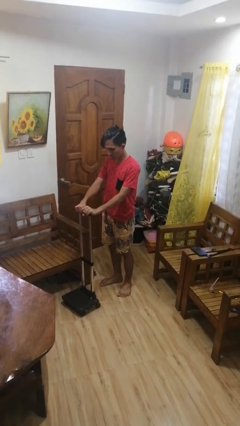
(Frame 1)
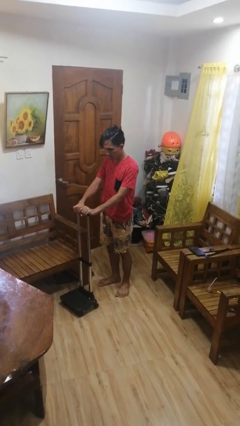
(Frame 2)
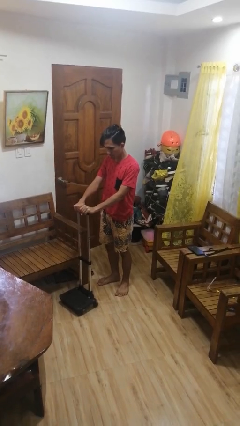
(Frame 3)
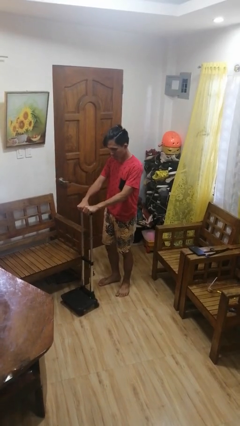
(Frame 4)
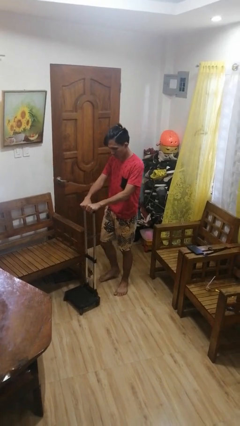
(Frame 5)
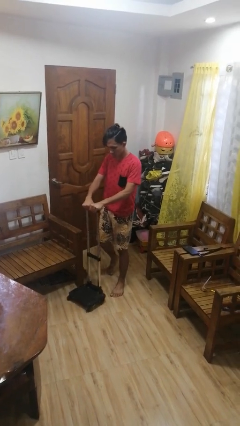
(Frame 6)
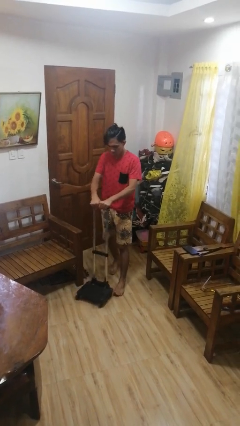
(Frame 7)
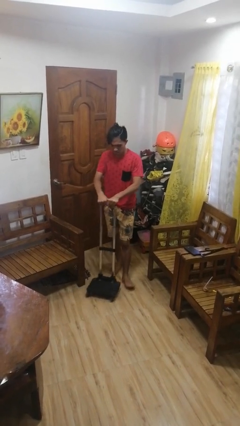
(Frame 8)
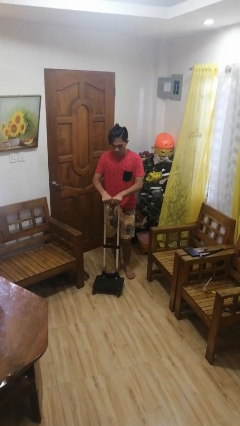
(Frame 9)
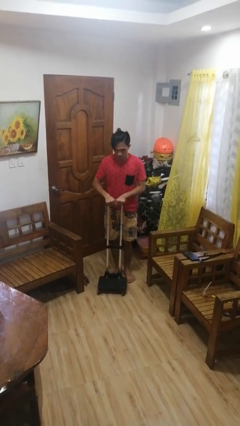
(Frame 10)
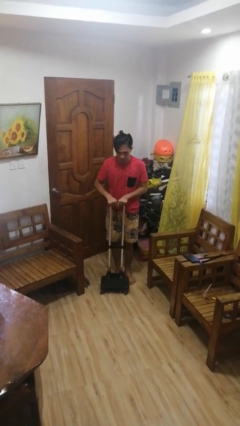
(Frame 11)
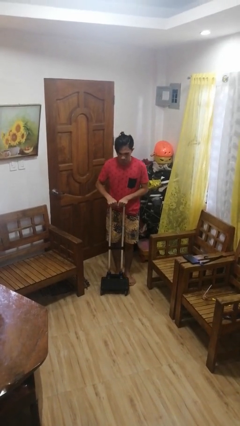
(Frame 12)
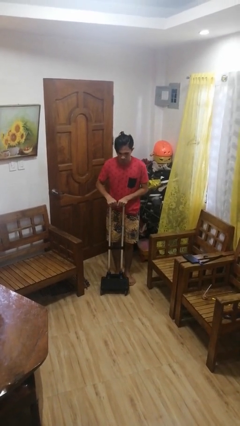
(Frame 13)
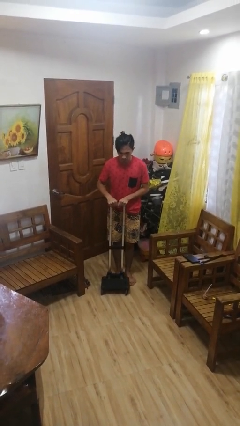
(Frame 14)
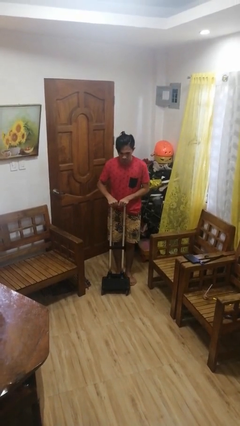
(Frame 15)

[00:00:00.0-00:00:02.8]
person pulls wheeled cart

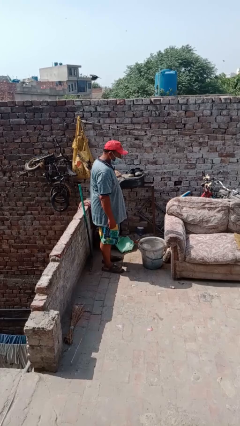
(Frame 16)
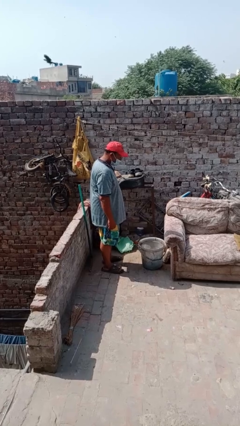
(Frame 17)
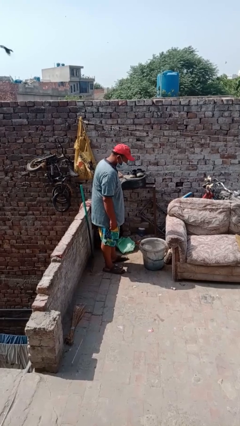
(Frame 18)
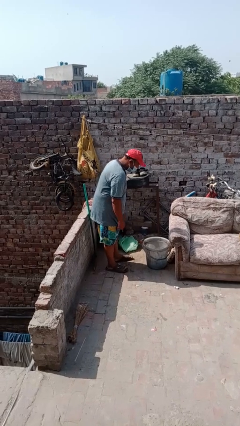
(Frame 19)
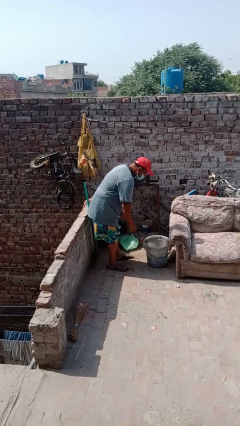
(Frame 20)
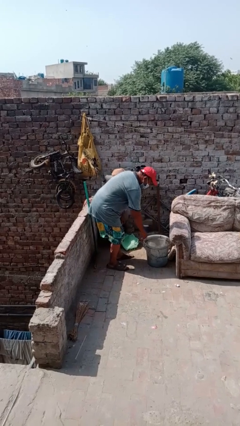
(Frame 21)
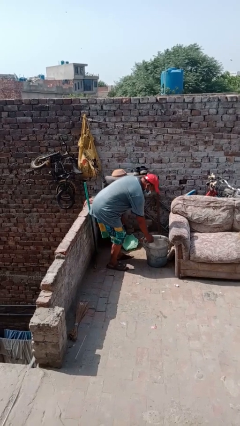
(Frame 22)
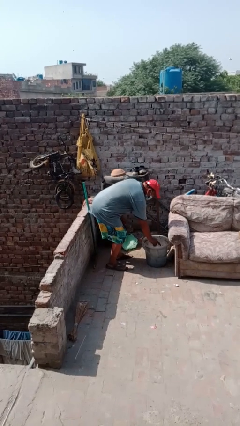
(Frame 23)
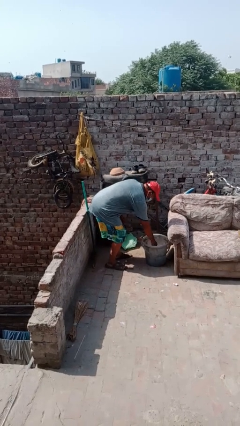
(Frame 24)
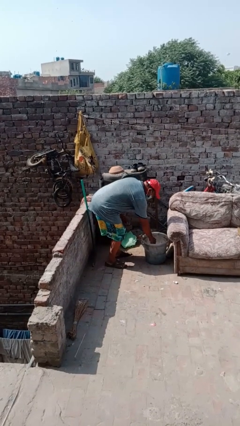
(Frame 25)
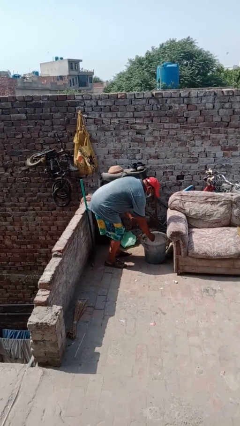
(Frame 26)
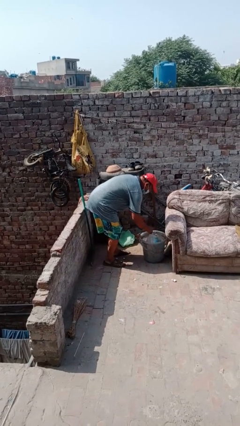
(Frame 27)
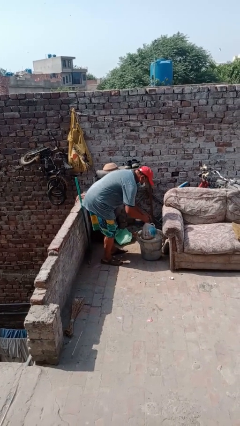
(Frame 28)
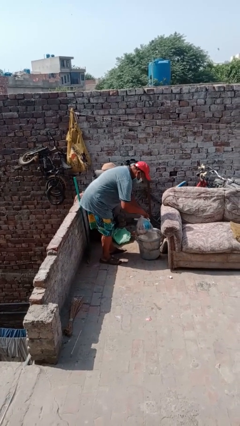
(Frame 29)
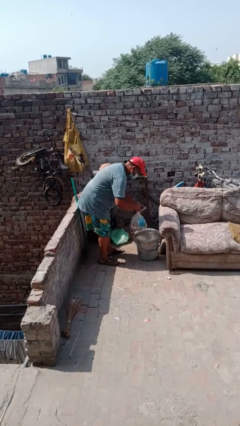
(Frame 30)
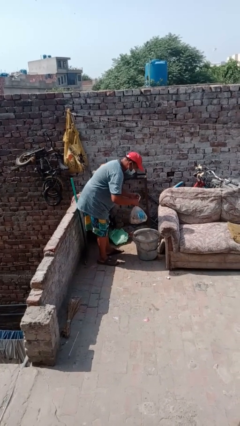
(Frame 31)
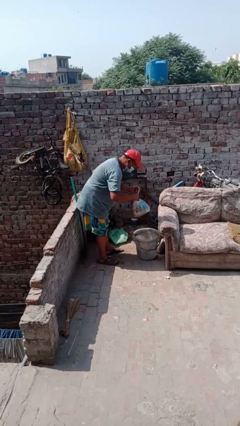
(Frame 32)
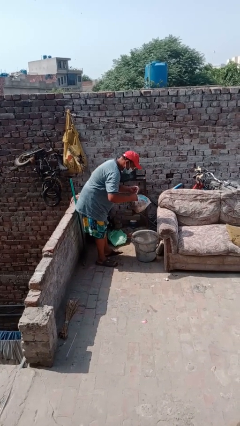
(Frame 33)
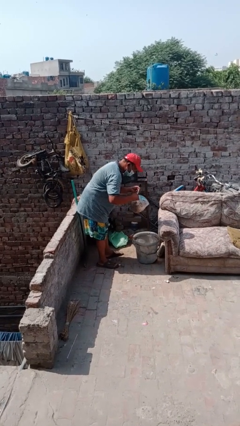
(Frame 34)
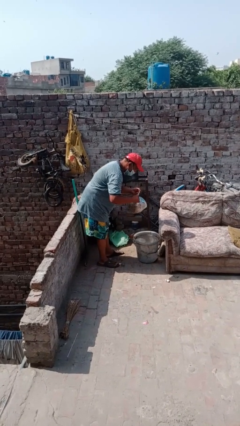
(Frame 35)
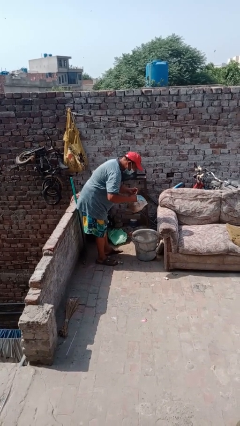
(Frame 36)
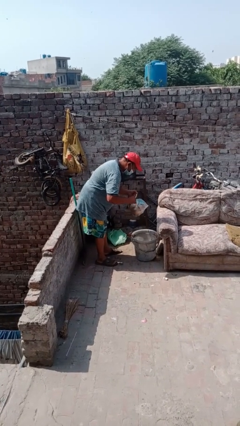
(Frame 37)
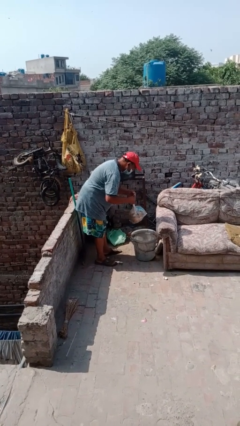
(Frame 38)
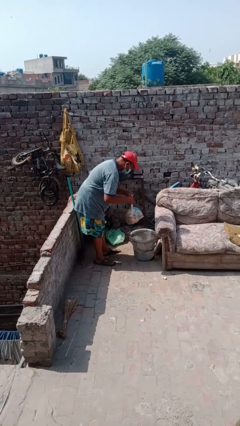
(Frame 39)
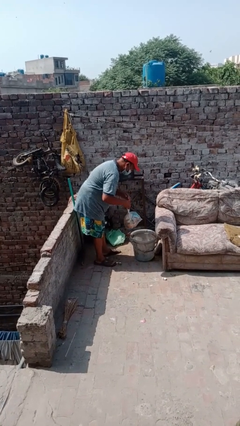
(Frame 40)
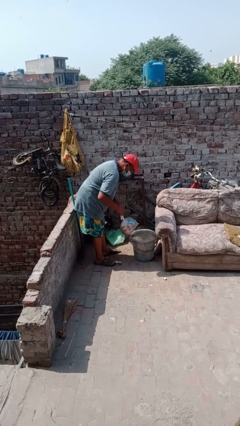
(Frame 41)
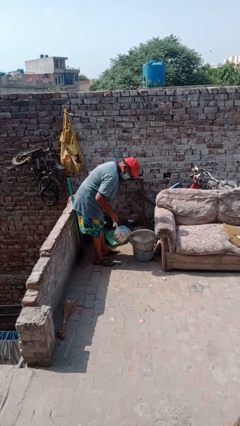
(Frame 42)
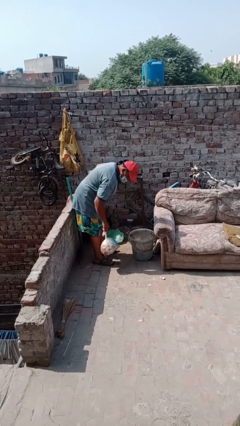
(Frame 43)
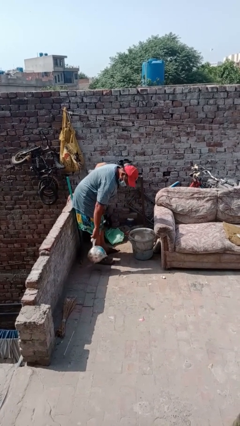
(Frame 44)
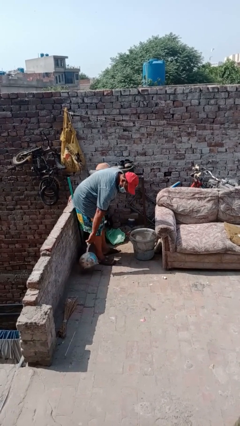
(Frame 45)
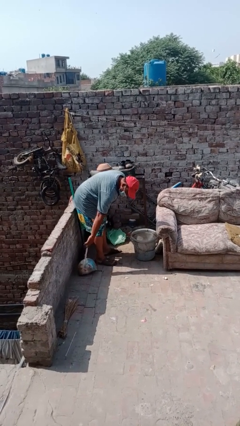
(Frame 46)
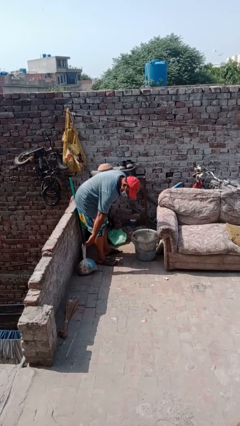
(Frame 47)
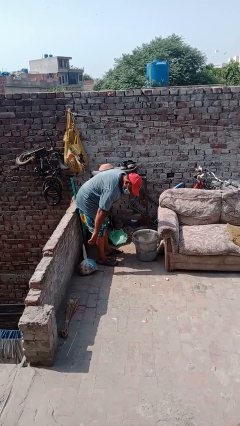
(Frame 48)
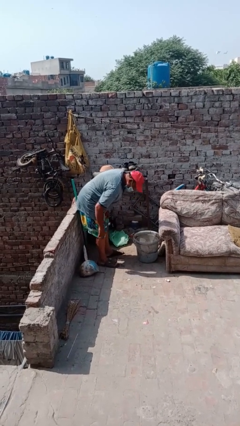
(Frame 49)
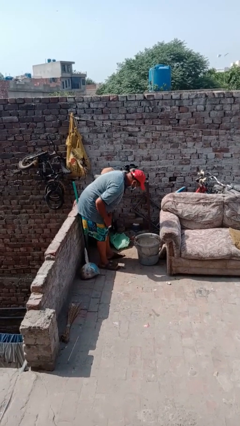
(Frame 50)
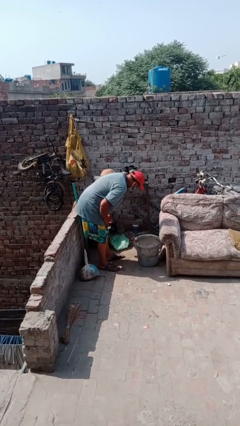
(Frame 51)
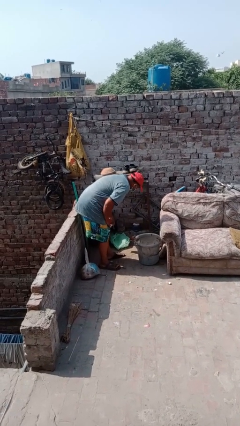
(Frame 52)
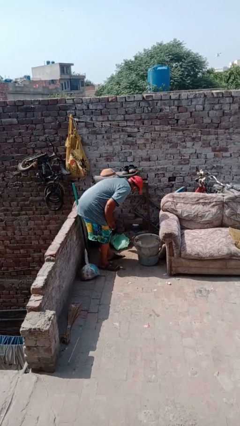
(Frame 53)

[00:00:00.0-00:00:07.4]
person removes trashbag from trashcan

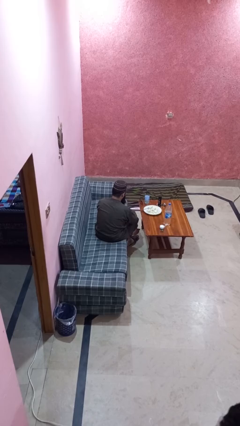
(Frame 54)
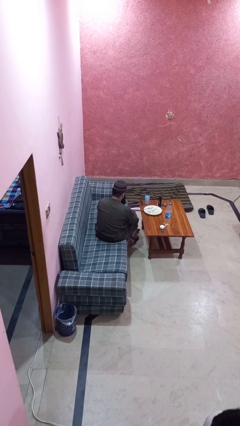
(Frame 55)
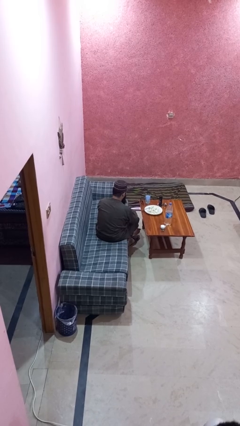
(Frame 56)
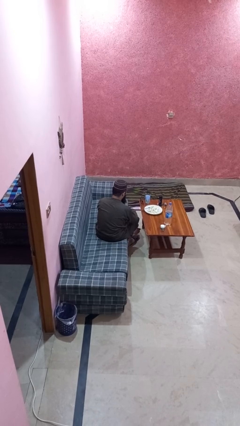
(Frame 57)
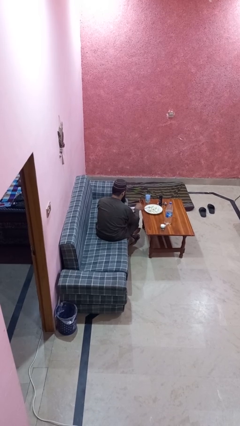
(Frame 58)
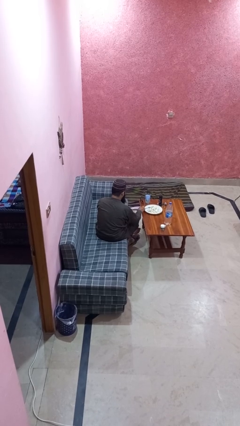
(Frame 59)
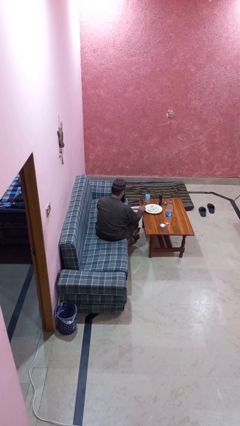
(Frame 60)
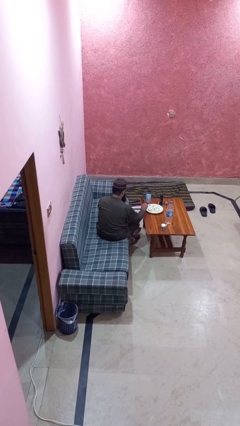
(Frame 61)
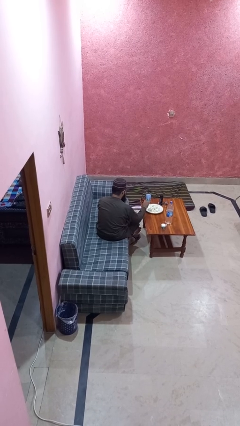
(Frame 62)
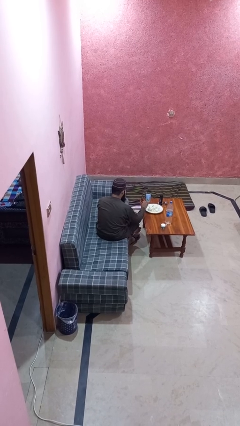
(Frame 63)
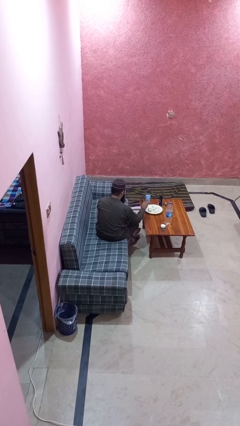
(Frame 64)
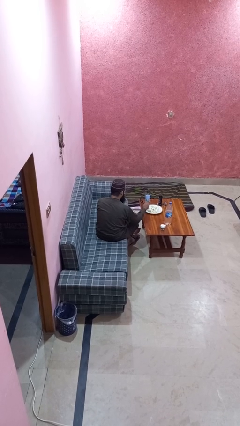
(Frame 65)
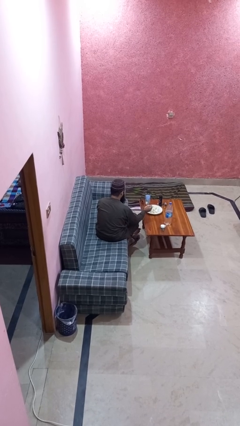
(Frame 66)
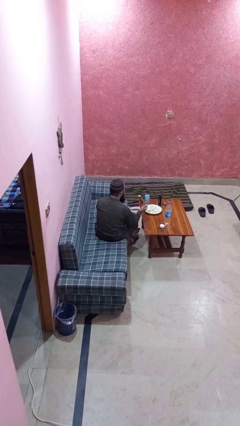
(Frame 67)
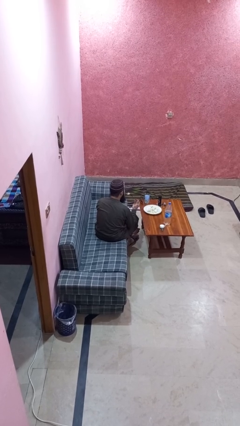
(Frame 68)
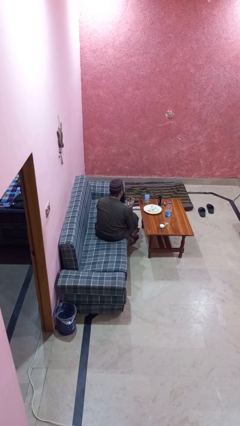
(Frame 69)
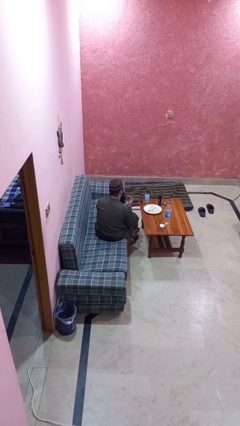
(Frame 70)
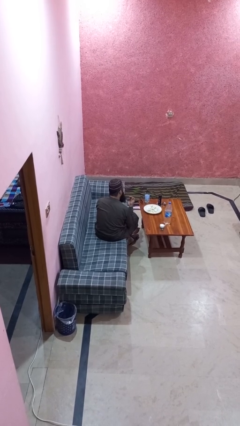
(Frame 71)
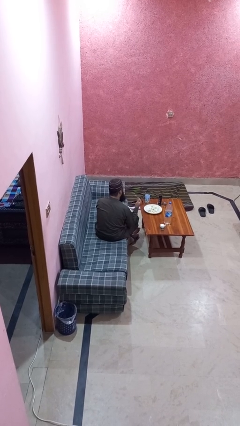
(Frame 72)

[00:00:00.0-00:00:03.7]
person eats with utensil

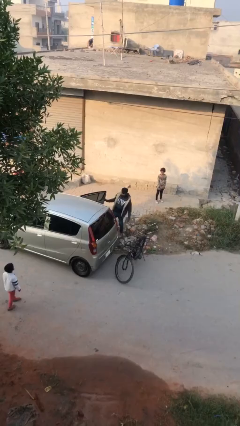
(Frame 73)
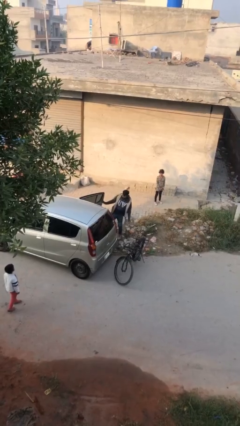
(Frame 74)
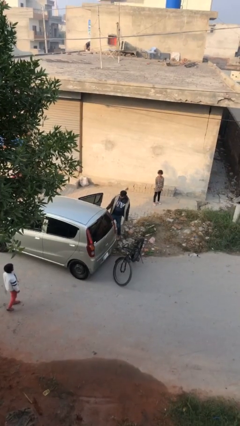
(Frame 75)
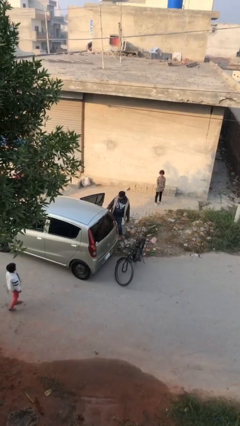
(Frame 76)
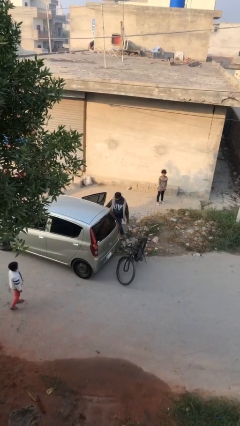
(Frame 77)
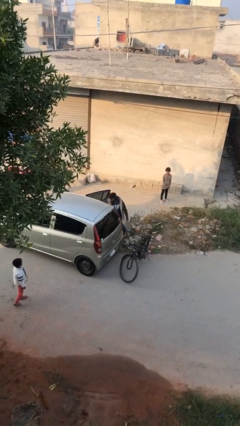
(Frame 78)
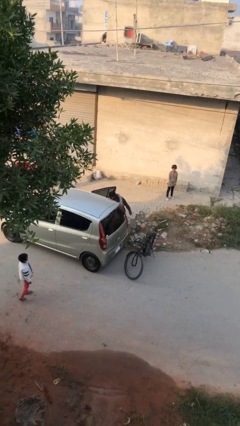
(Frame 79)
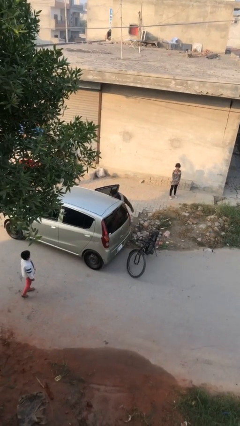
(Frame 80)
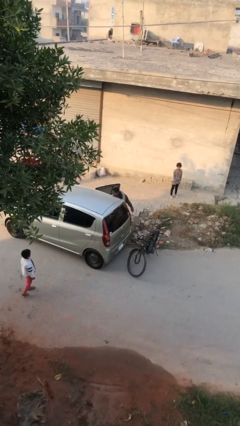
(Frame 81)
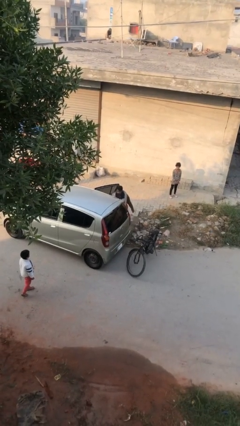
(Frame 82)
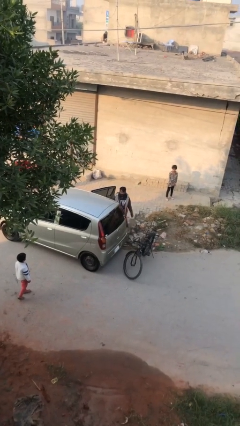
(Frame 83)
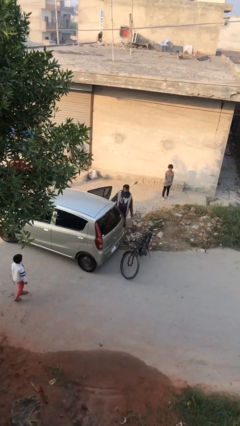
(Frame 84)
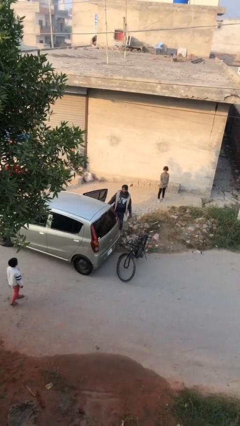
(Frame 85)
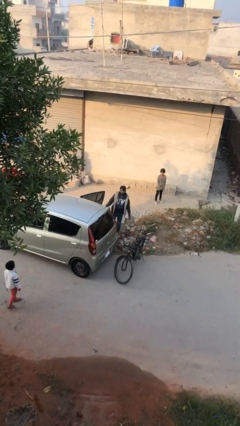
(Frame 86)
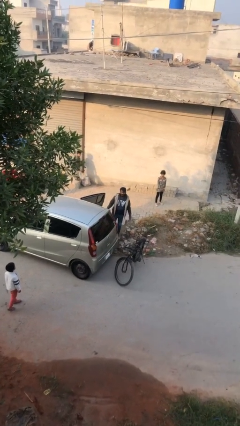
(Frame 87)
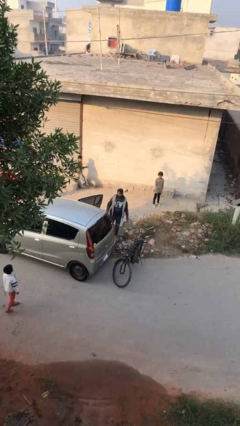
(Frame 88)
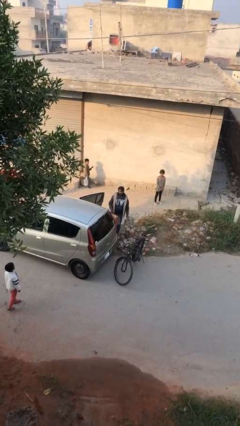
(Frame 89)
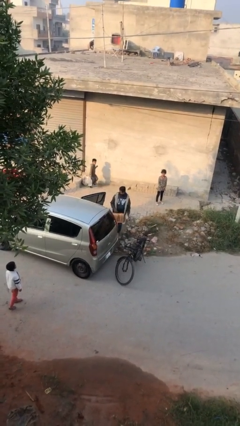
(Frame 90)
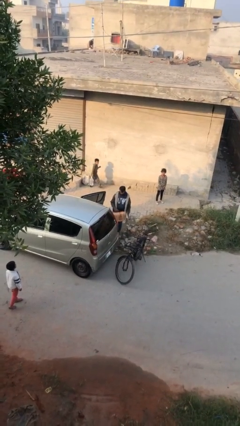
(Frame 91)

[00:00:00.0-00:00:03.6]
person unloads car

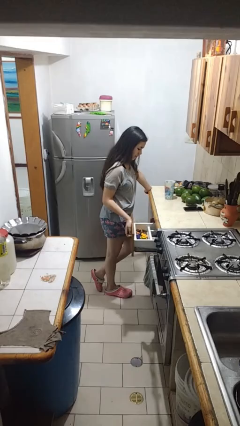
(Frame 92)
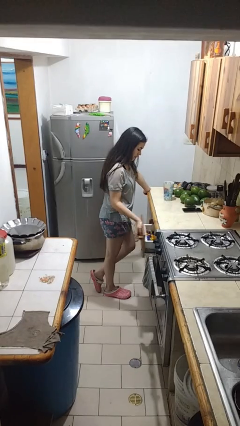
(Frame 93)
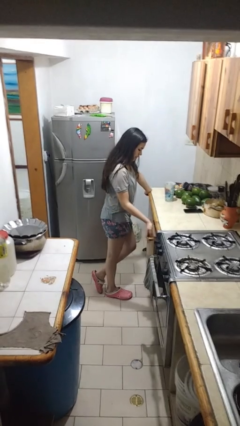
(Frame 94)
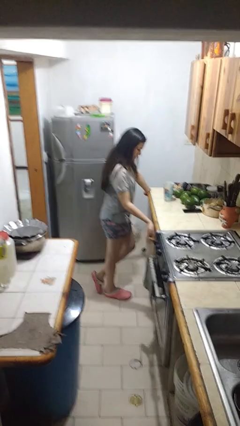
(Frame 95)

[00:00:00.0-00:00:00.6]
person closes kitchen drawer
